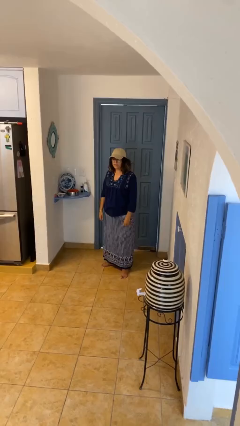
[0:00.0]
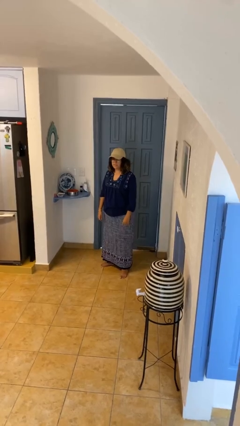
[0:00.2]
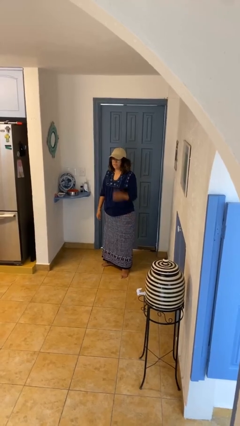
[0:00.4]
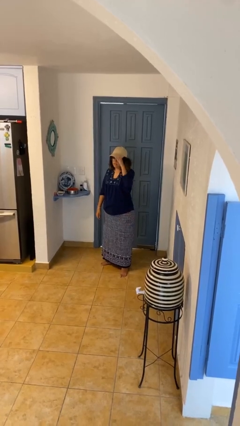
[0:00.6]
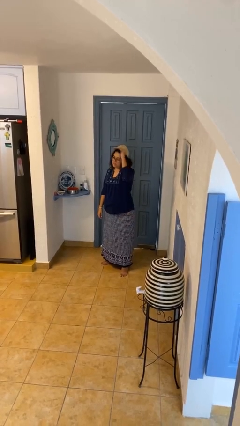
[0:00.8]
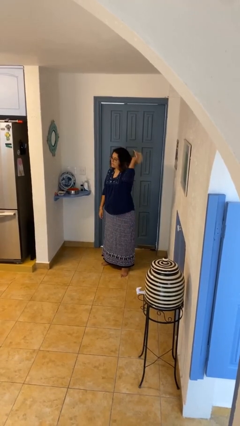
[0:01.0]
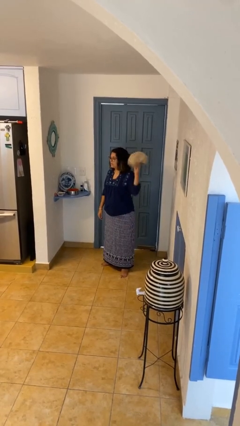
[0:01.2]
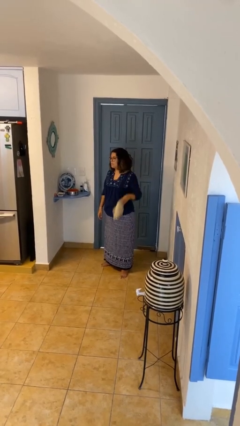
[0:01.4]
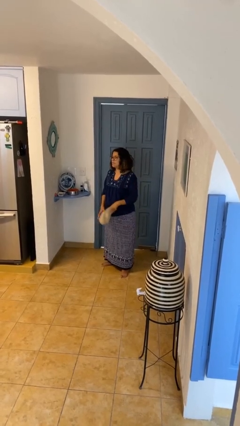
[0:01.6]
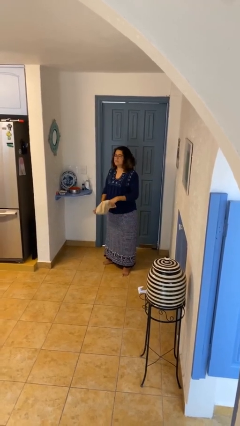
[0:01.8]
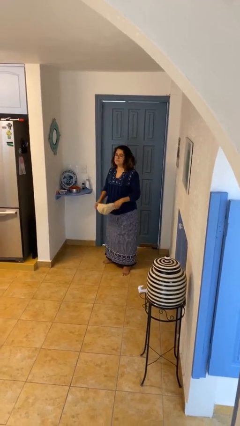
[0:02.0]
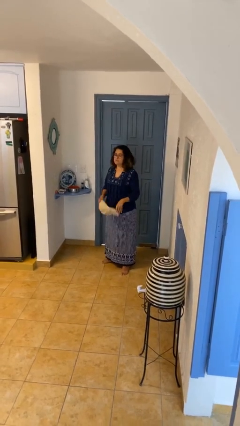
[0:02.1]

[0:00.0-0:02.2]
person takes off hat

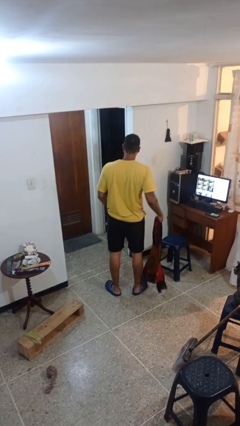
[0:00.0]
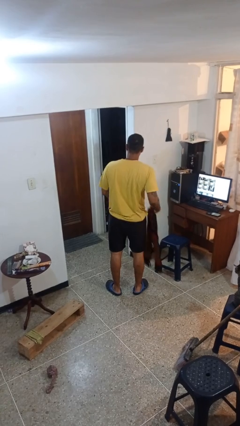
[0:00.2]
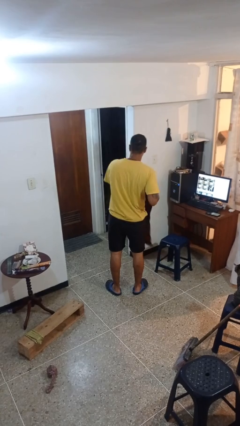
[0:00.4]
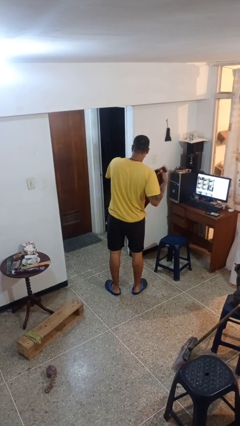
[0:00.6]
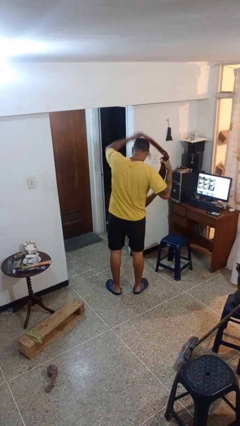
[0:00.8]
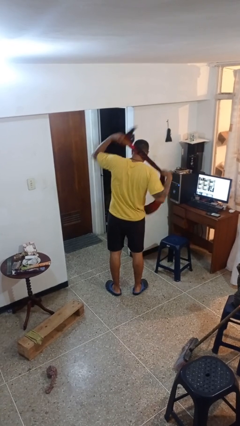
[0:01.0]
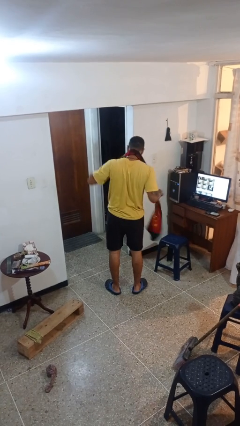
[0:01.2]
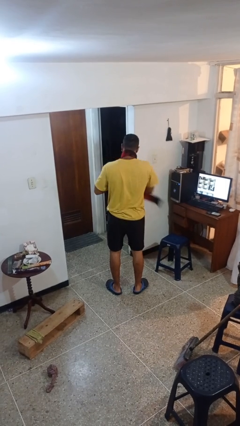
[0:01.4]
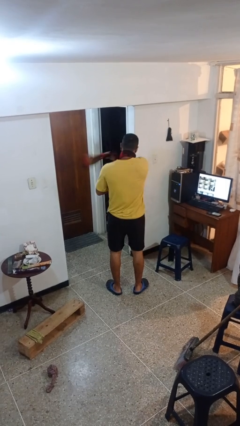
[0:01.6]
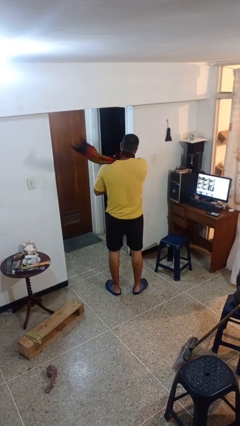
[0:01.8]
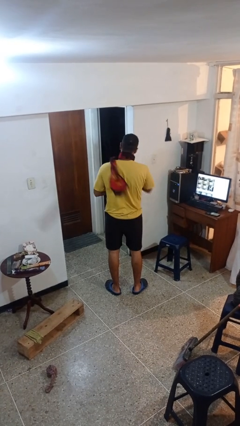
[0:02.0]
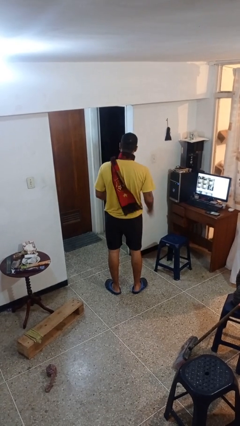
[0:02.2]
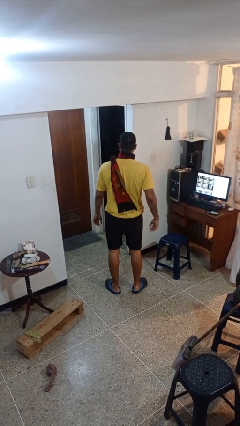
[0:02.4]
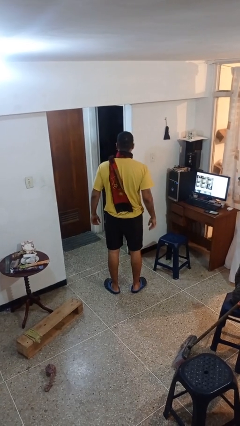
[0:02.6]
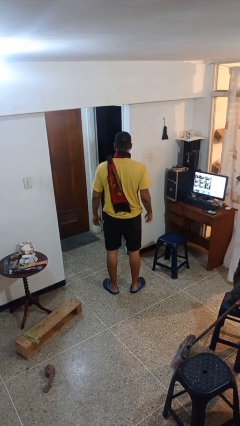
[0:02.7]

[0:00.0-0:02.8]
person puts on scarf

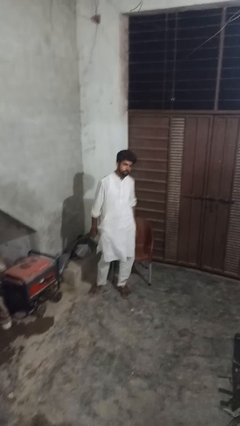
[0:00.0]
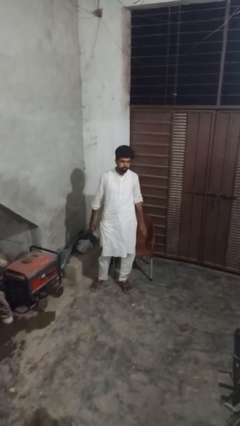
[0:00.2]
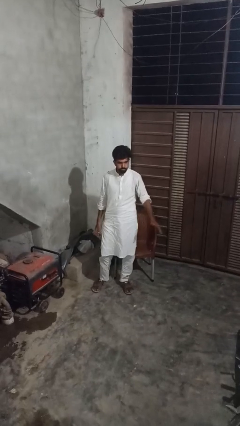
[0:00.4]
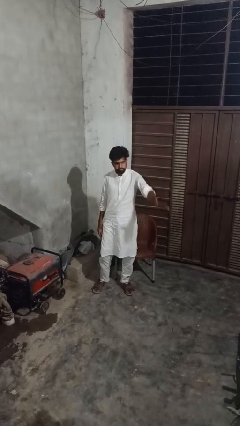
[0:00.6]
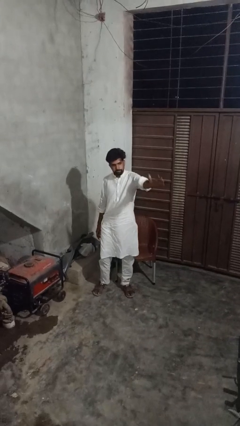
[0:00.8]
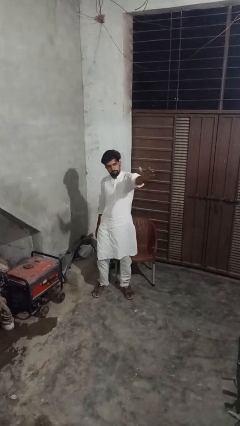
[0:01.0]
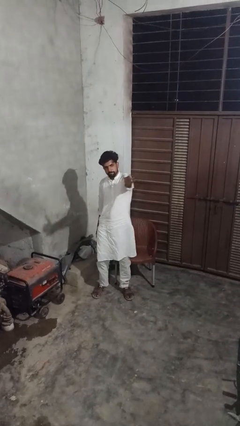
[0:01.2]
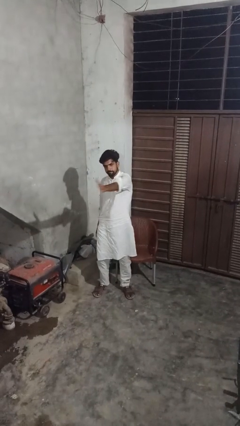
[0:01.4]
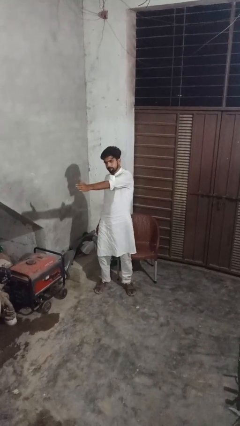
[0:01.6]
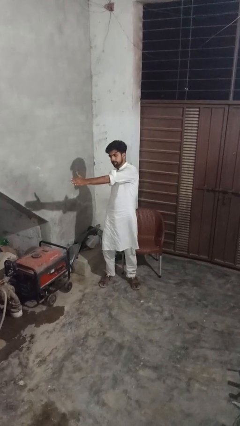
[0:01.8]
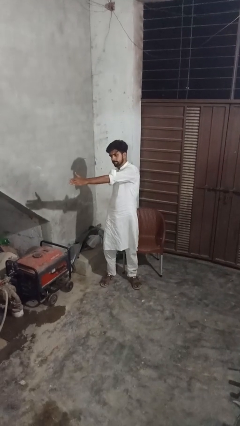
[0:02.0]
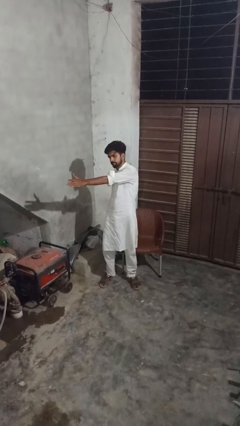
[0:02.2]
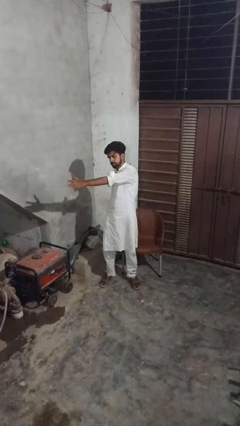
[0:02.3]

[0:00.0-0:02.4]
person gestures swipe right

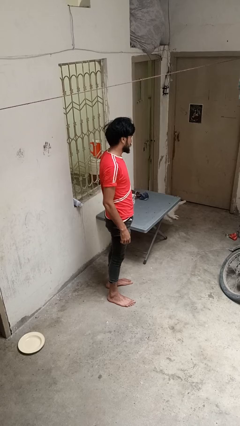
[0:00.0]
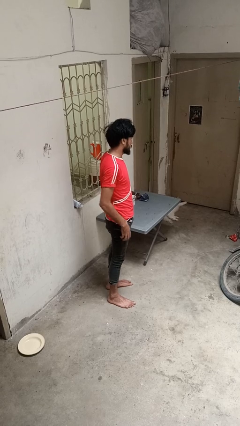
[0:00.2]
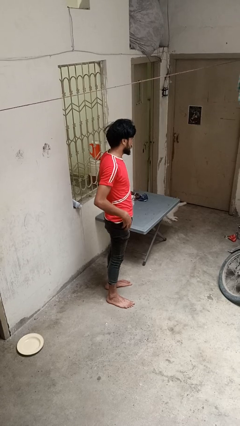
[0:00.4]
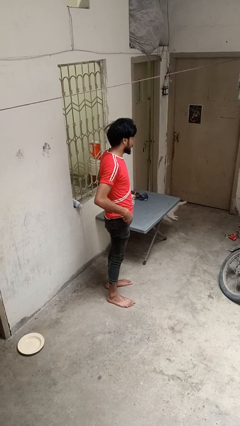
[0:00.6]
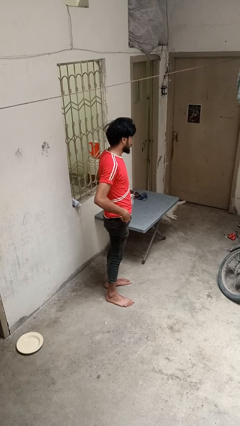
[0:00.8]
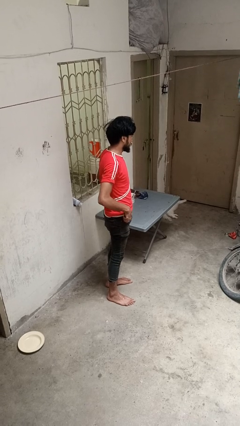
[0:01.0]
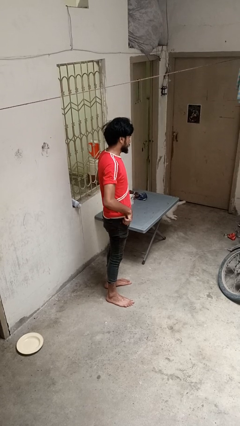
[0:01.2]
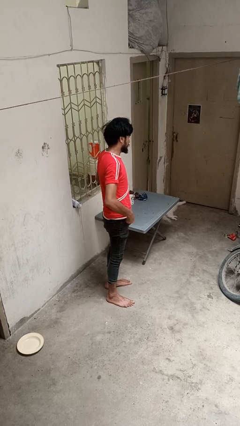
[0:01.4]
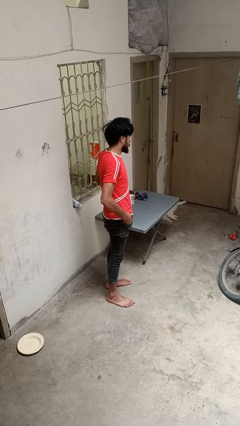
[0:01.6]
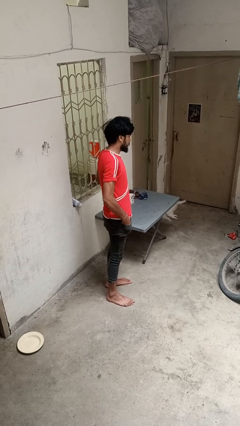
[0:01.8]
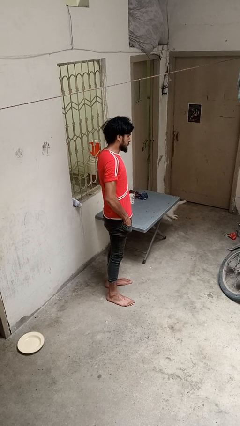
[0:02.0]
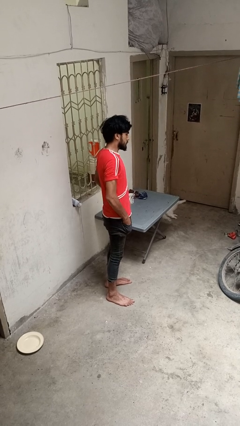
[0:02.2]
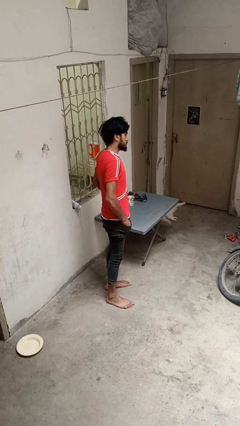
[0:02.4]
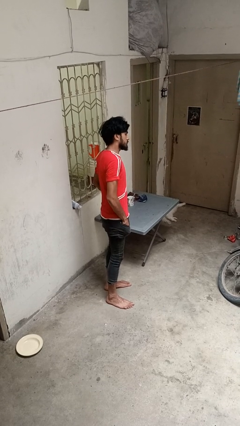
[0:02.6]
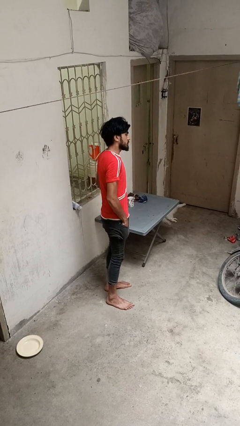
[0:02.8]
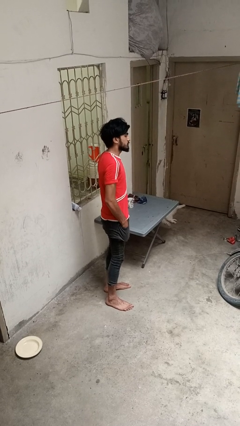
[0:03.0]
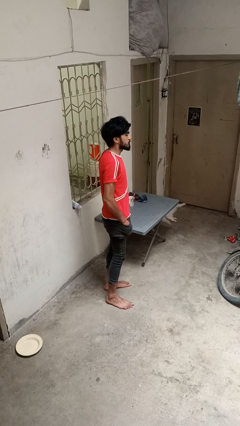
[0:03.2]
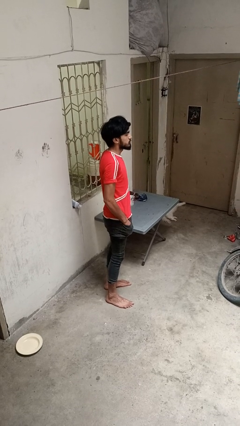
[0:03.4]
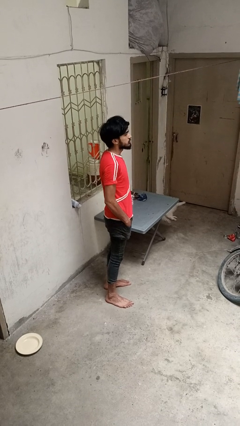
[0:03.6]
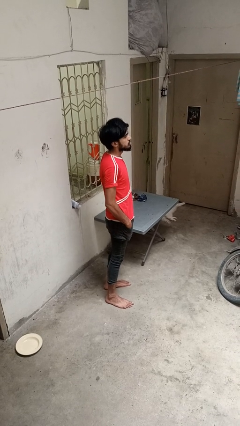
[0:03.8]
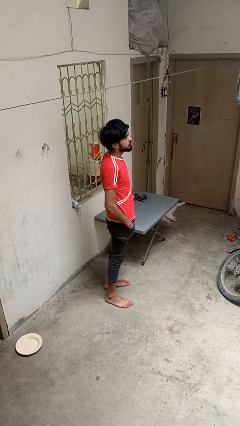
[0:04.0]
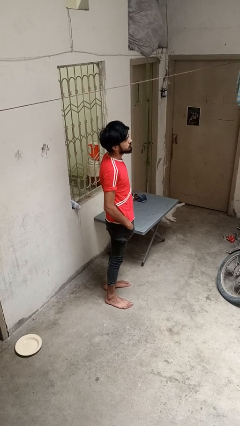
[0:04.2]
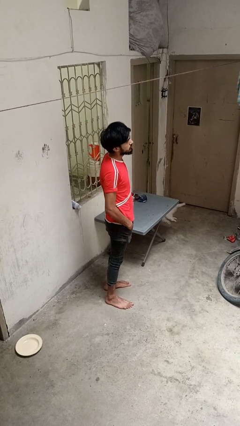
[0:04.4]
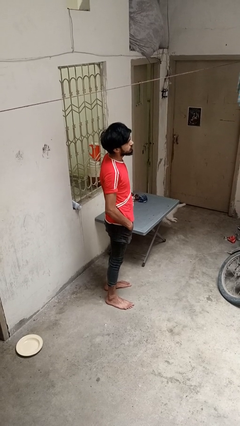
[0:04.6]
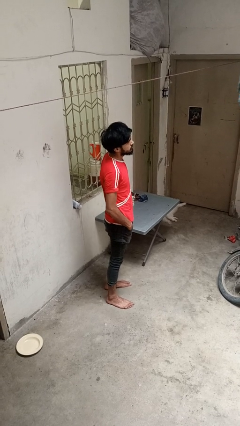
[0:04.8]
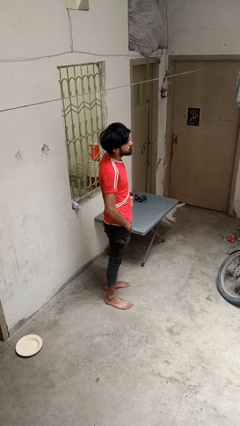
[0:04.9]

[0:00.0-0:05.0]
person puts hands in back pockets

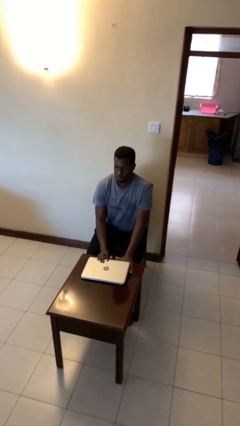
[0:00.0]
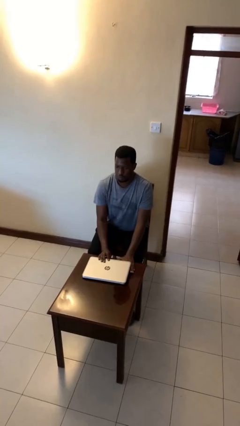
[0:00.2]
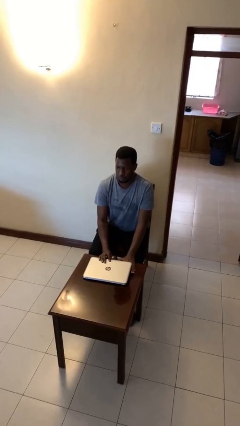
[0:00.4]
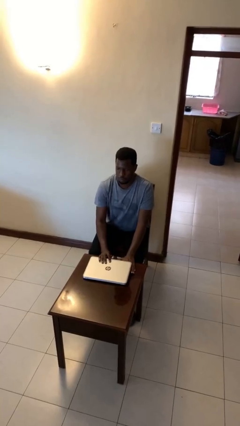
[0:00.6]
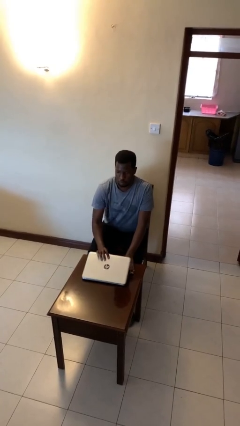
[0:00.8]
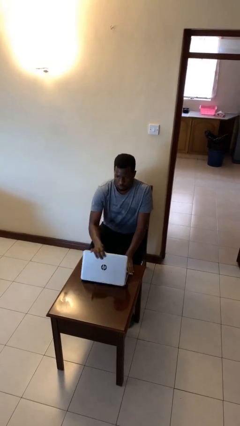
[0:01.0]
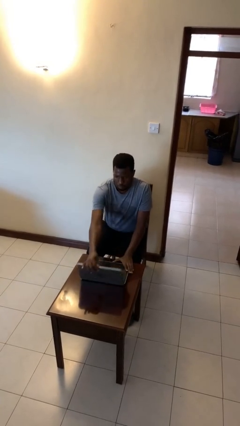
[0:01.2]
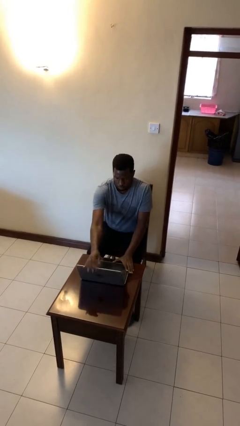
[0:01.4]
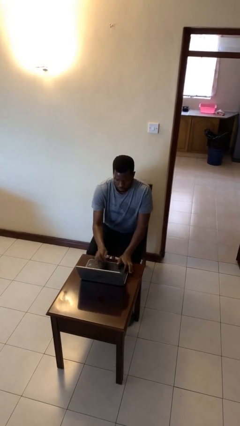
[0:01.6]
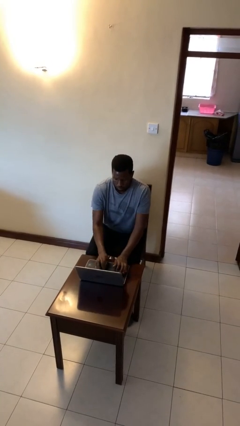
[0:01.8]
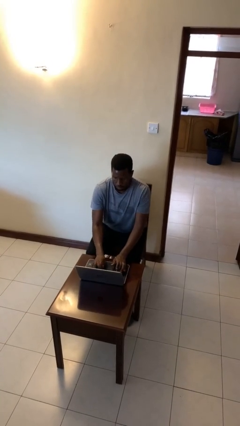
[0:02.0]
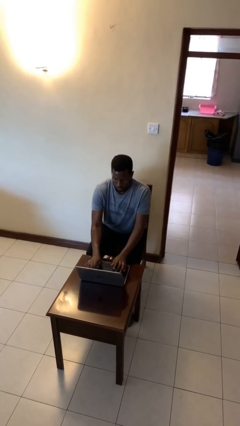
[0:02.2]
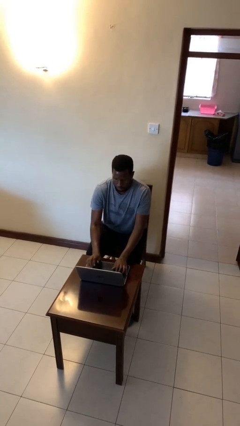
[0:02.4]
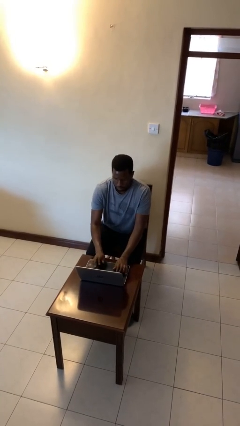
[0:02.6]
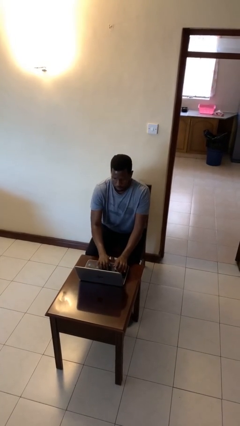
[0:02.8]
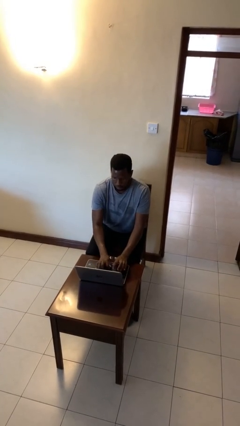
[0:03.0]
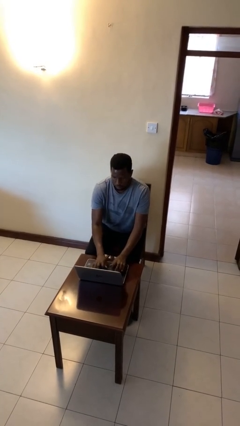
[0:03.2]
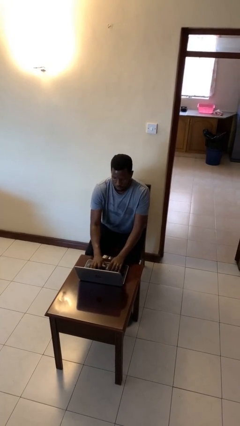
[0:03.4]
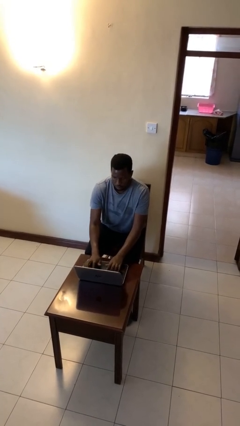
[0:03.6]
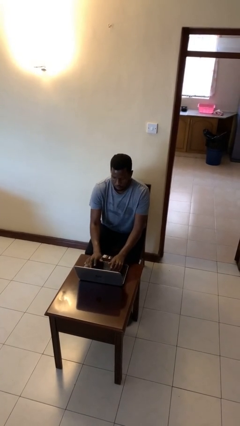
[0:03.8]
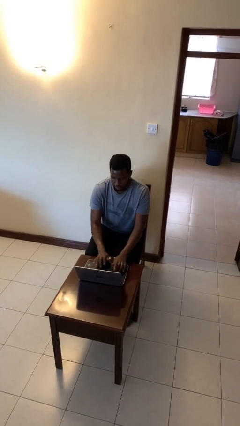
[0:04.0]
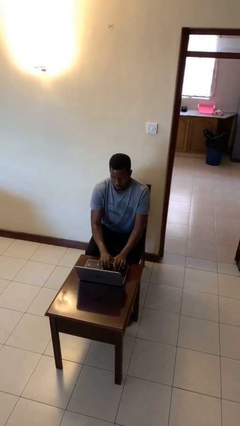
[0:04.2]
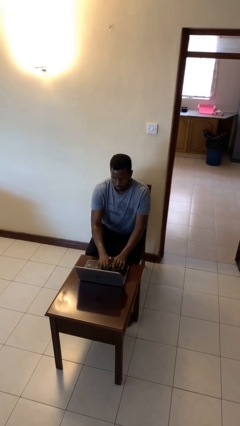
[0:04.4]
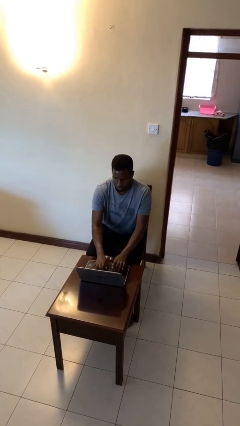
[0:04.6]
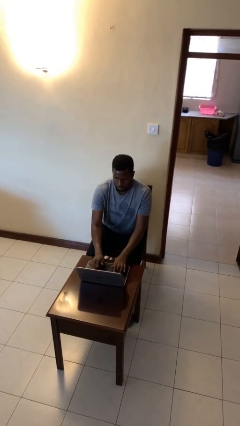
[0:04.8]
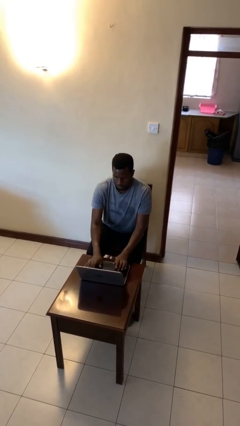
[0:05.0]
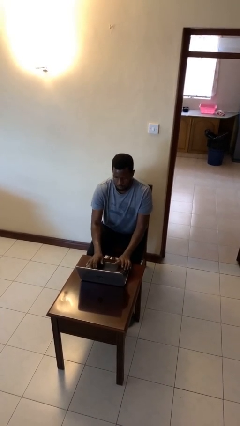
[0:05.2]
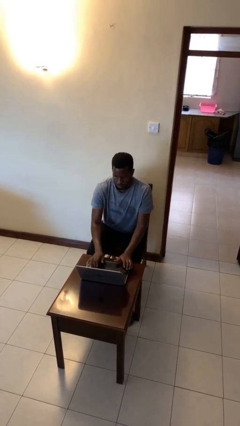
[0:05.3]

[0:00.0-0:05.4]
person interacts with laptop
